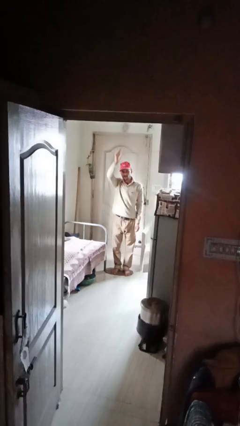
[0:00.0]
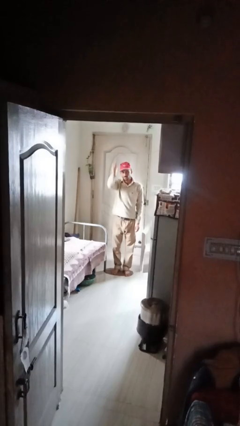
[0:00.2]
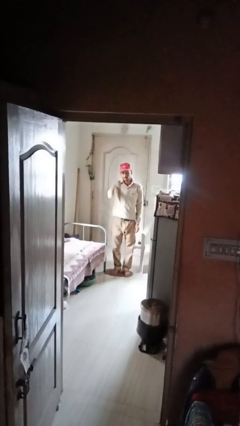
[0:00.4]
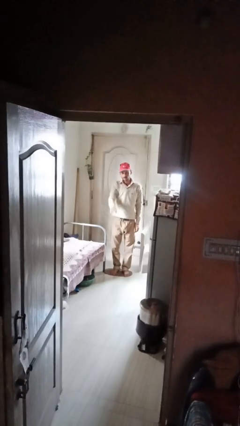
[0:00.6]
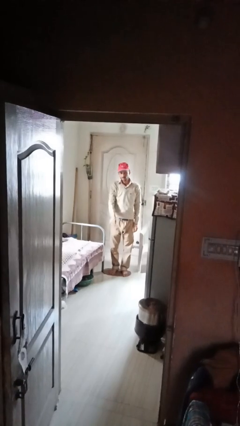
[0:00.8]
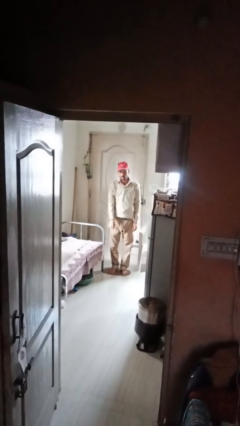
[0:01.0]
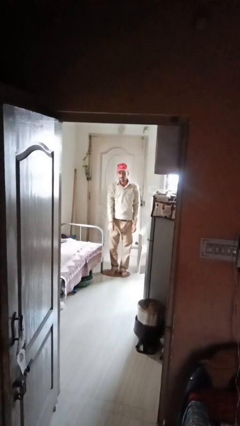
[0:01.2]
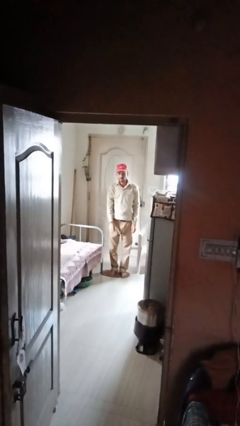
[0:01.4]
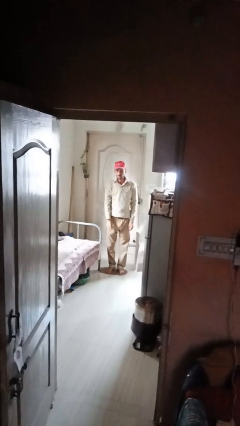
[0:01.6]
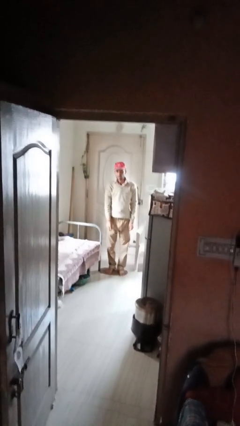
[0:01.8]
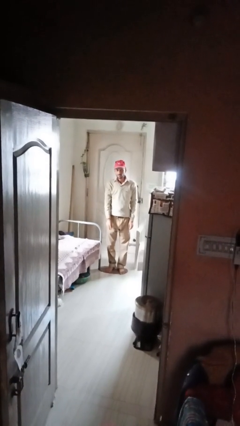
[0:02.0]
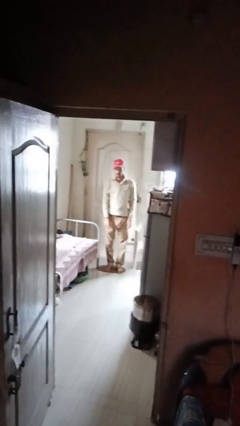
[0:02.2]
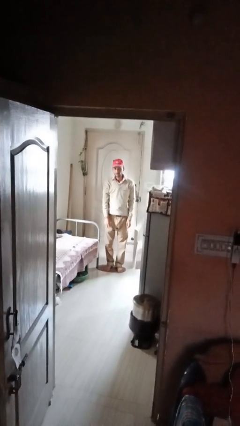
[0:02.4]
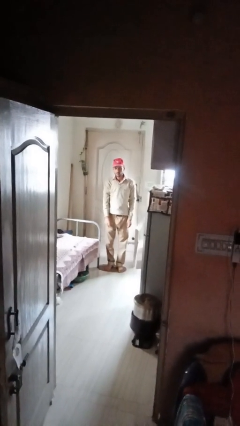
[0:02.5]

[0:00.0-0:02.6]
person gestures swipe down

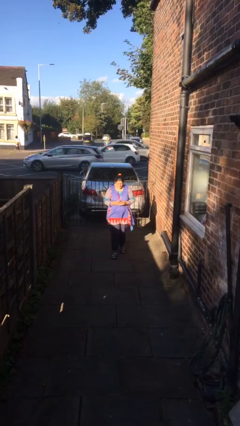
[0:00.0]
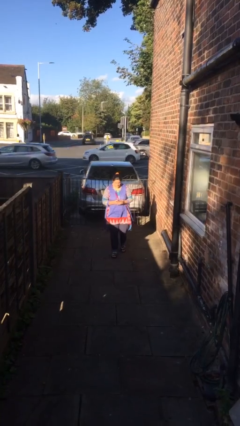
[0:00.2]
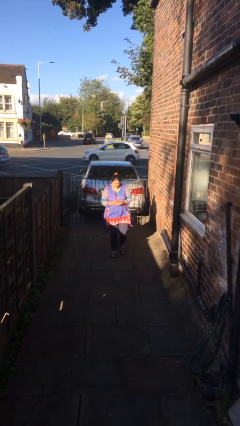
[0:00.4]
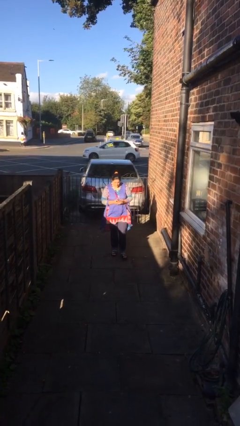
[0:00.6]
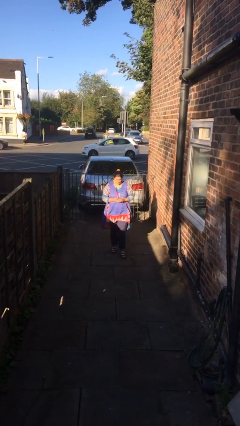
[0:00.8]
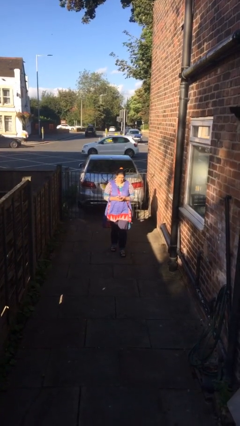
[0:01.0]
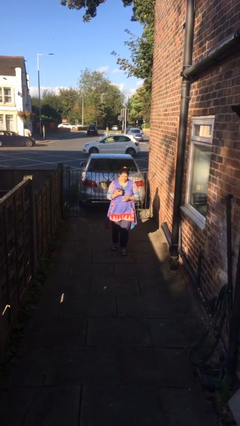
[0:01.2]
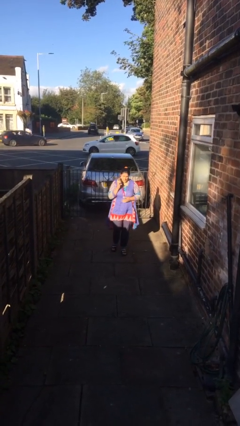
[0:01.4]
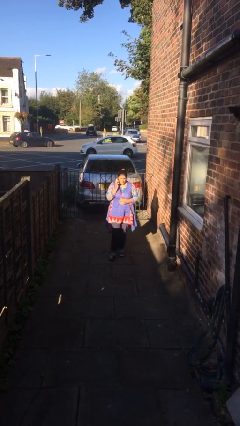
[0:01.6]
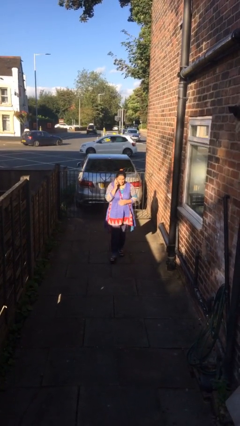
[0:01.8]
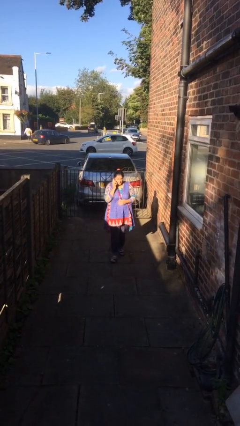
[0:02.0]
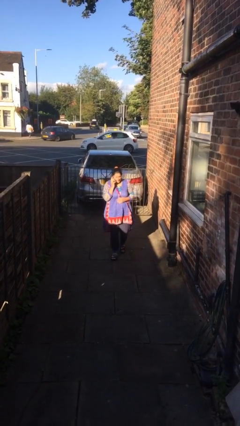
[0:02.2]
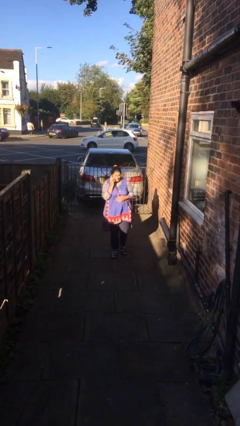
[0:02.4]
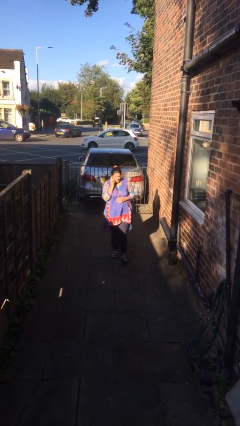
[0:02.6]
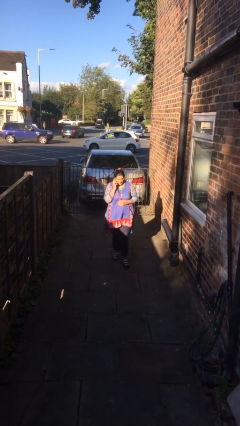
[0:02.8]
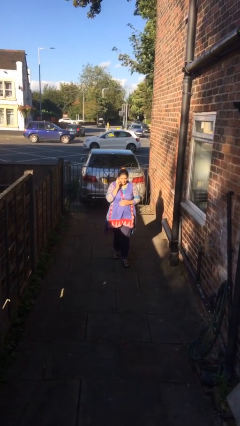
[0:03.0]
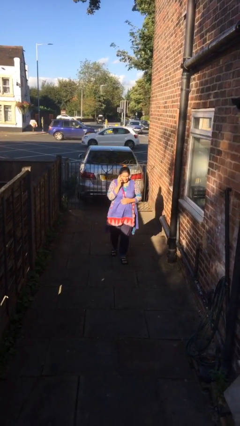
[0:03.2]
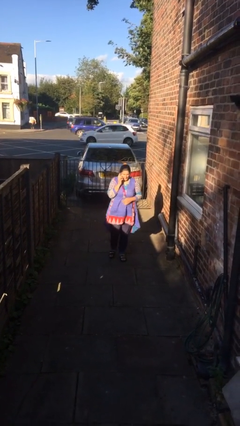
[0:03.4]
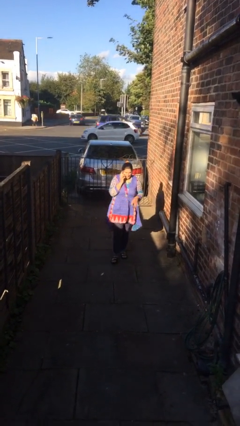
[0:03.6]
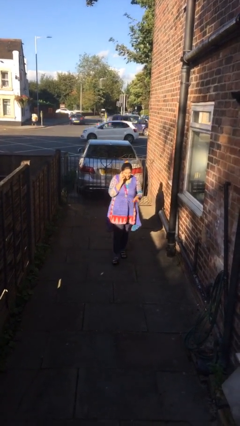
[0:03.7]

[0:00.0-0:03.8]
person talks on phone

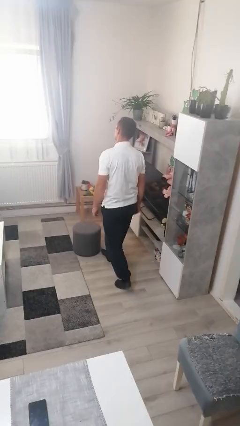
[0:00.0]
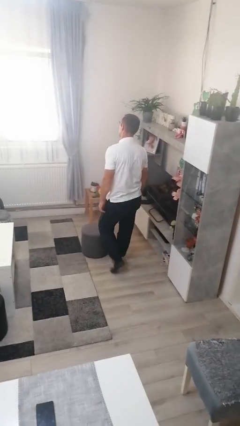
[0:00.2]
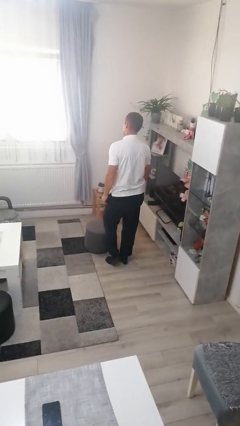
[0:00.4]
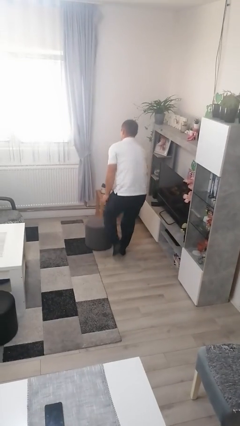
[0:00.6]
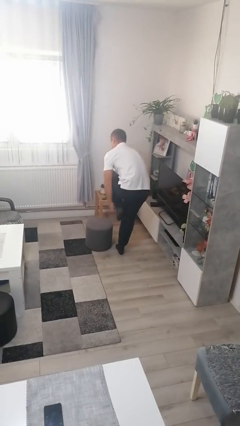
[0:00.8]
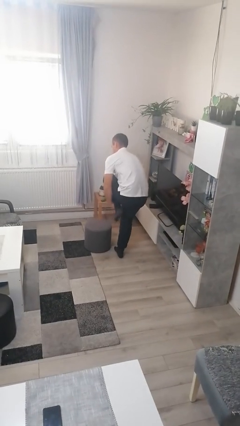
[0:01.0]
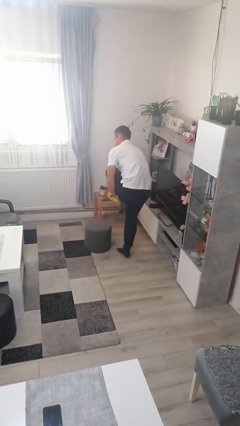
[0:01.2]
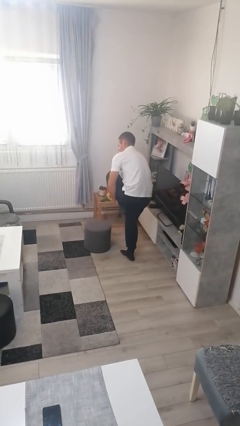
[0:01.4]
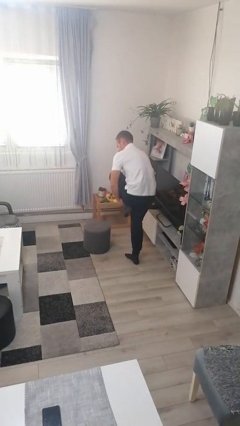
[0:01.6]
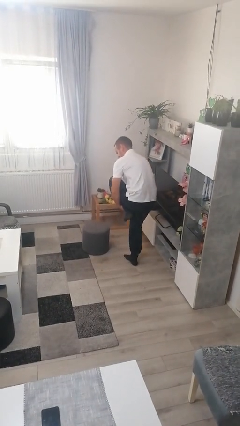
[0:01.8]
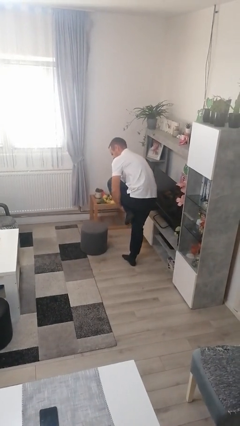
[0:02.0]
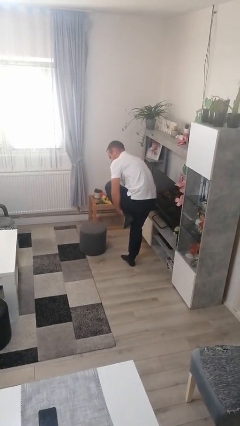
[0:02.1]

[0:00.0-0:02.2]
person stubs toe

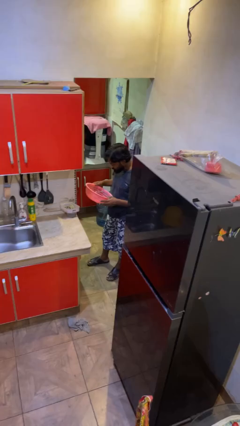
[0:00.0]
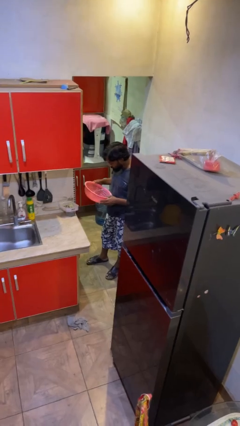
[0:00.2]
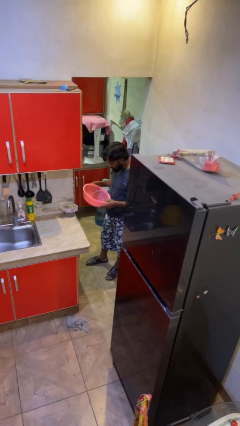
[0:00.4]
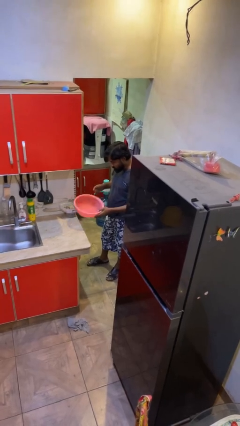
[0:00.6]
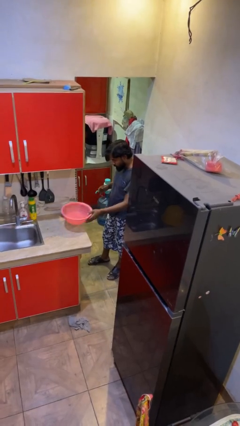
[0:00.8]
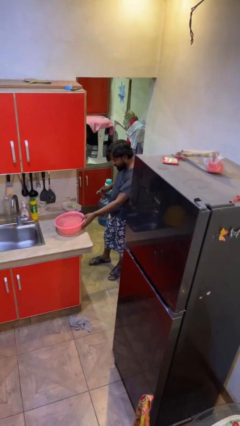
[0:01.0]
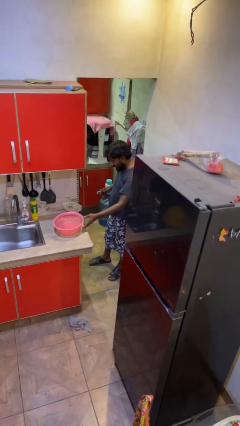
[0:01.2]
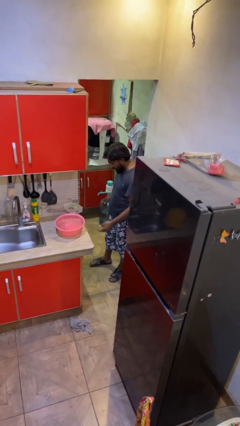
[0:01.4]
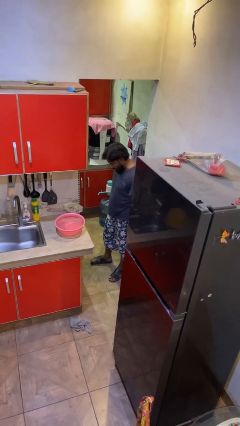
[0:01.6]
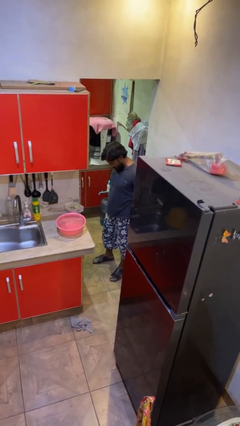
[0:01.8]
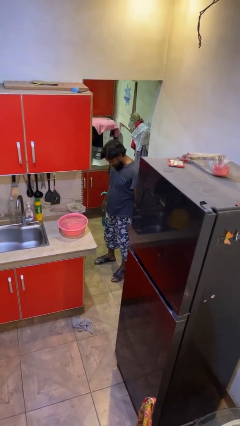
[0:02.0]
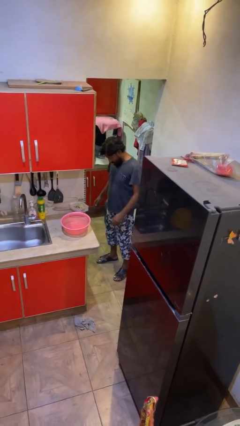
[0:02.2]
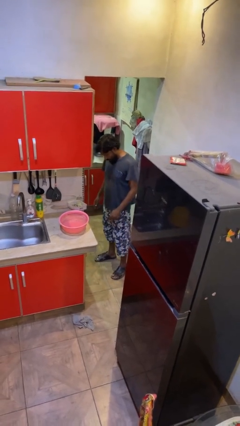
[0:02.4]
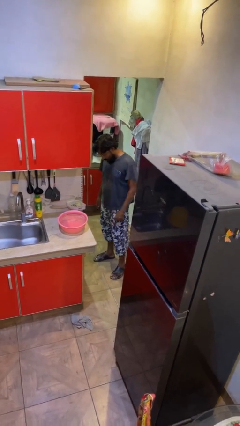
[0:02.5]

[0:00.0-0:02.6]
person puts down object on countertop

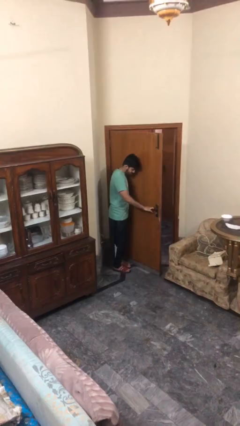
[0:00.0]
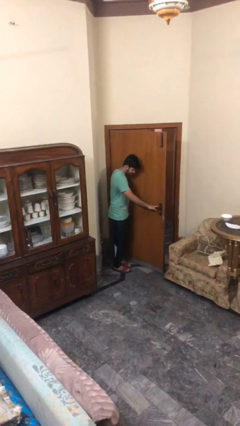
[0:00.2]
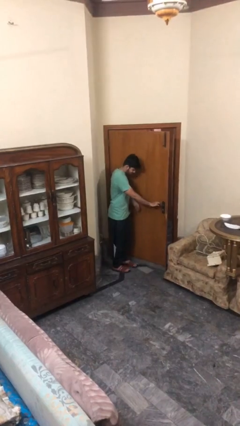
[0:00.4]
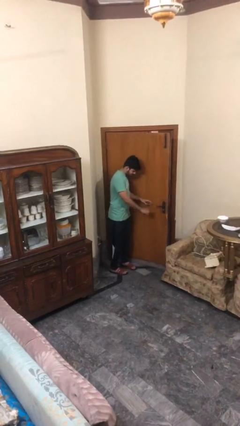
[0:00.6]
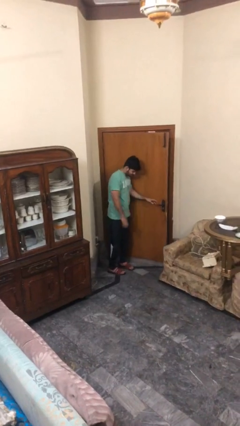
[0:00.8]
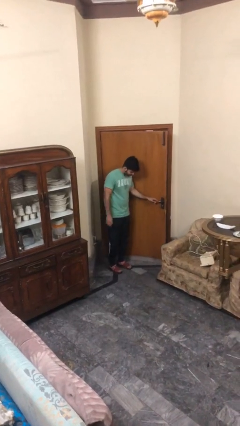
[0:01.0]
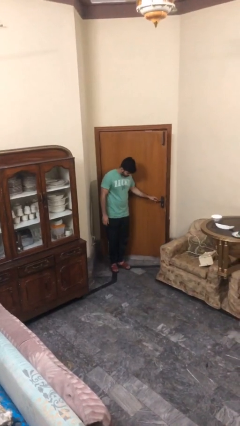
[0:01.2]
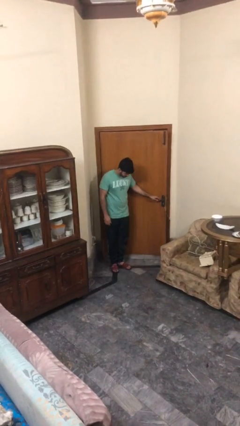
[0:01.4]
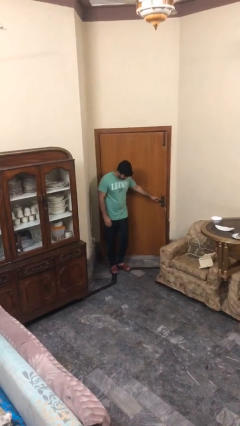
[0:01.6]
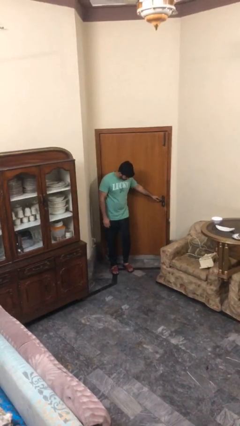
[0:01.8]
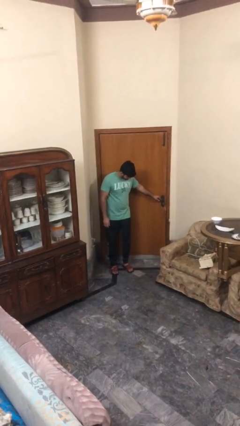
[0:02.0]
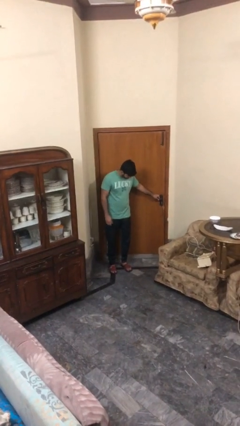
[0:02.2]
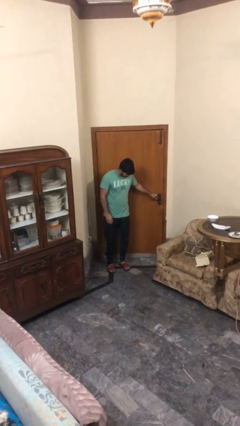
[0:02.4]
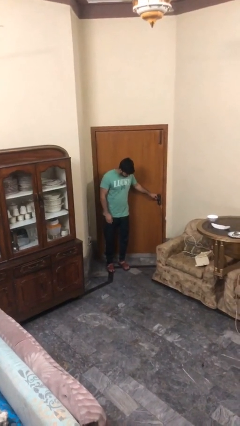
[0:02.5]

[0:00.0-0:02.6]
person closes facility door

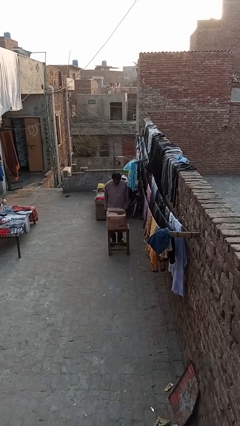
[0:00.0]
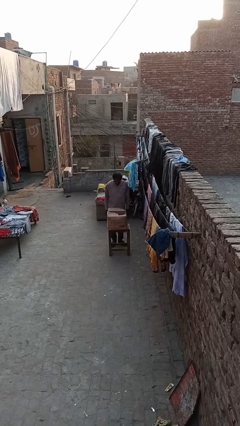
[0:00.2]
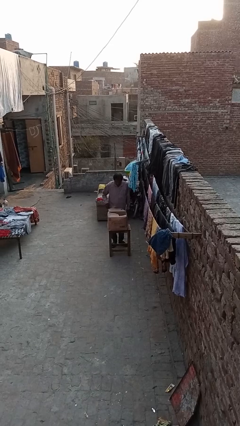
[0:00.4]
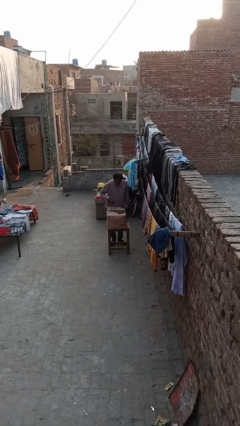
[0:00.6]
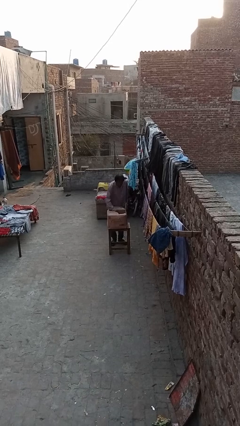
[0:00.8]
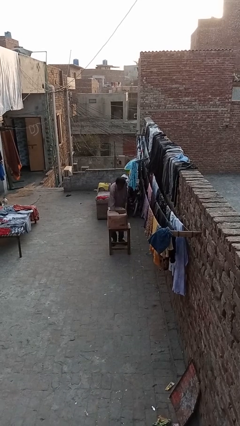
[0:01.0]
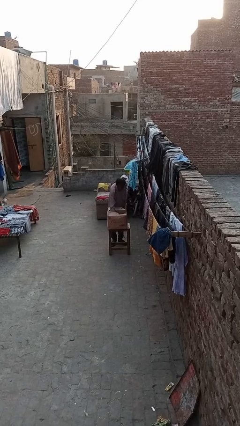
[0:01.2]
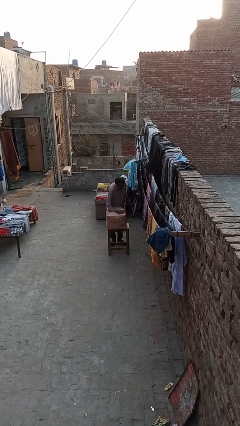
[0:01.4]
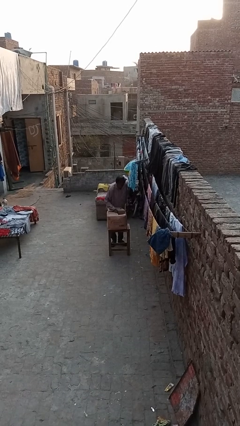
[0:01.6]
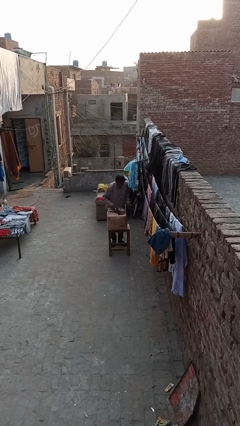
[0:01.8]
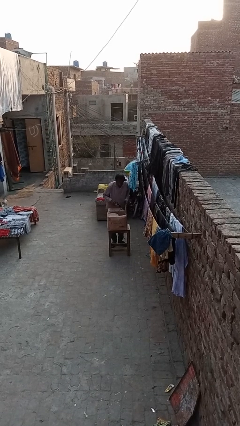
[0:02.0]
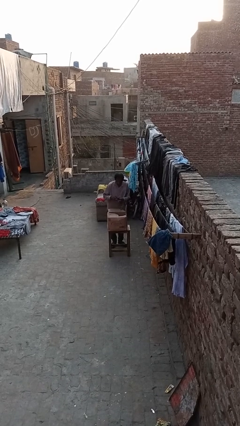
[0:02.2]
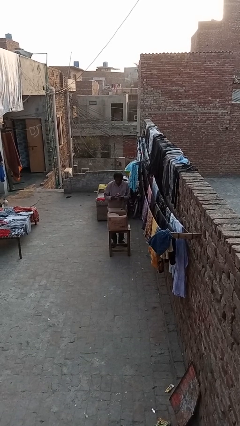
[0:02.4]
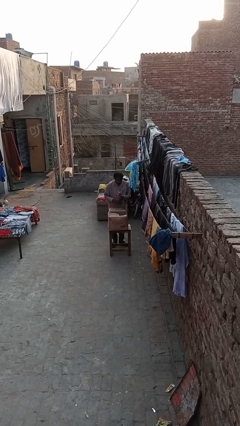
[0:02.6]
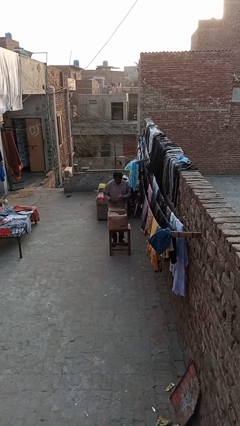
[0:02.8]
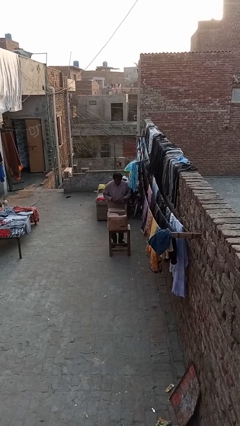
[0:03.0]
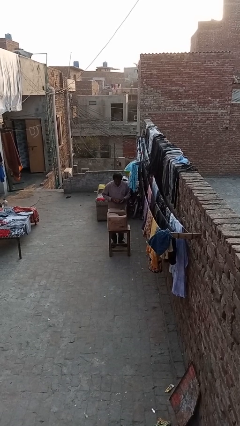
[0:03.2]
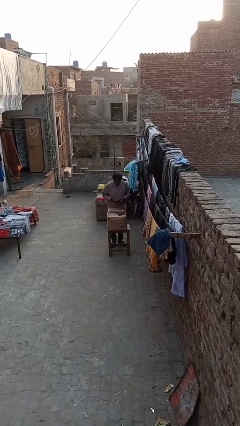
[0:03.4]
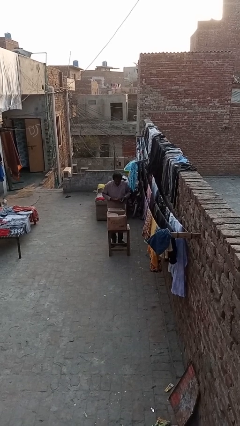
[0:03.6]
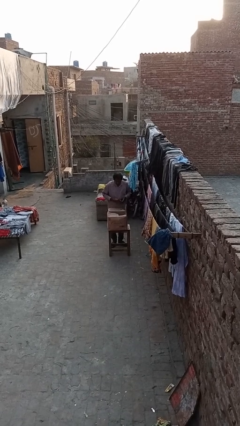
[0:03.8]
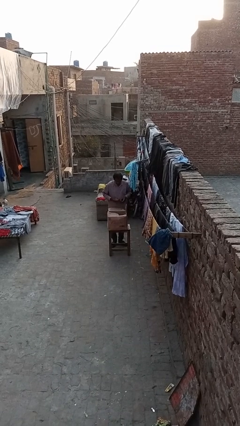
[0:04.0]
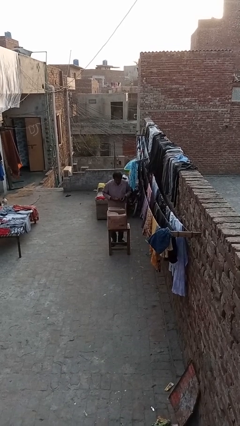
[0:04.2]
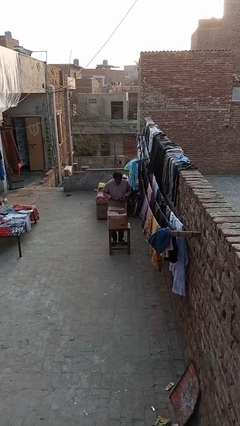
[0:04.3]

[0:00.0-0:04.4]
person takes object from box
